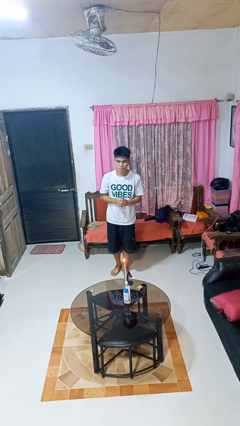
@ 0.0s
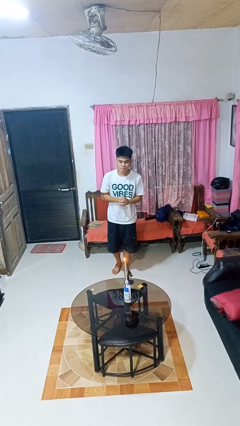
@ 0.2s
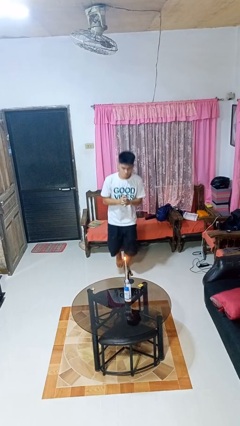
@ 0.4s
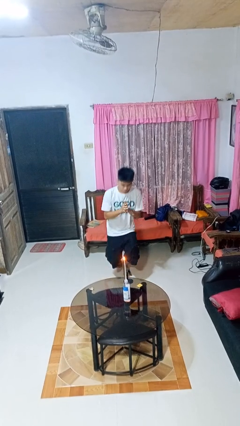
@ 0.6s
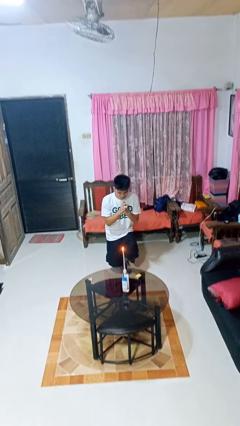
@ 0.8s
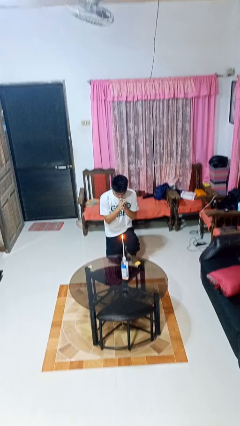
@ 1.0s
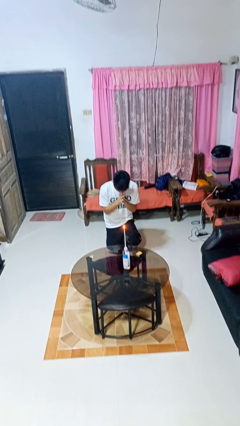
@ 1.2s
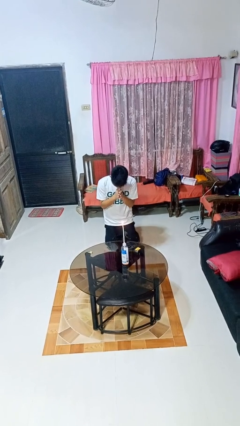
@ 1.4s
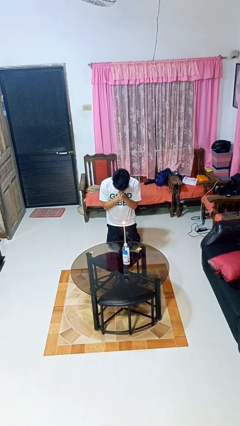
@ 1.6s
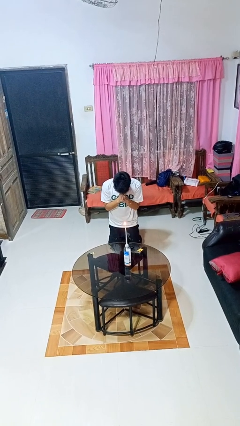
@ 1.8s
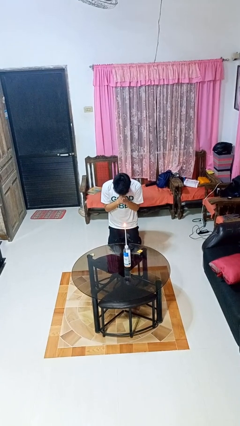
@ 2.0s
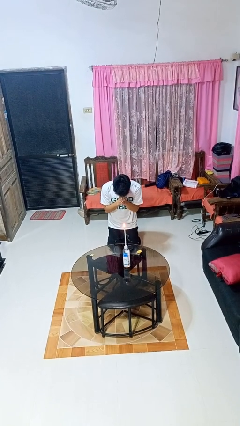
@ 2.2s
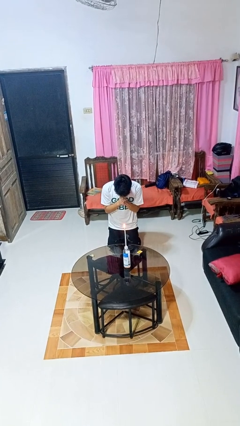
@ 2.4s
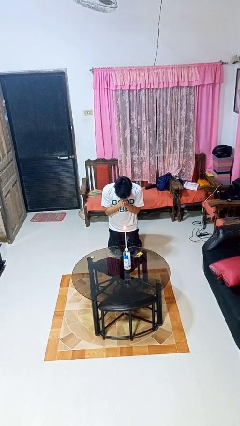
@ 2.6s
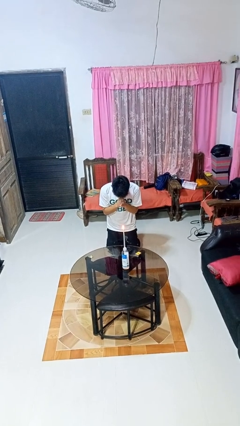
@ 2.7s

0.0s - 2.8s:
person prays

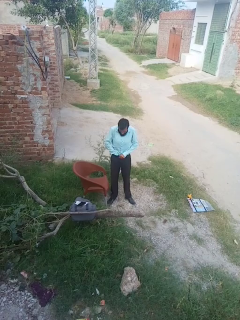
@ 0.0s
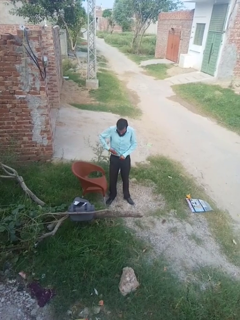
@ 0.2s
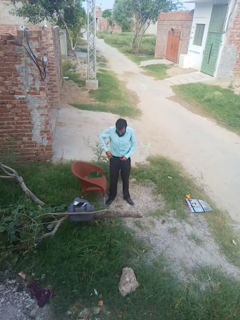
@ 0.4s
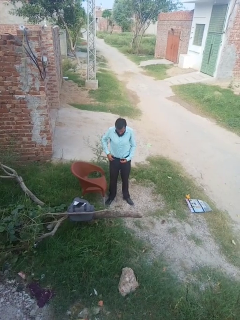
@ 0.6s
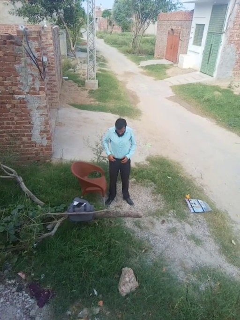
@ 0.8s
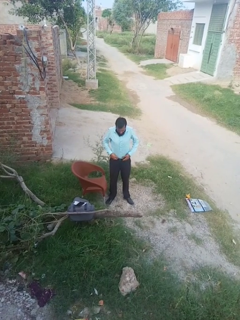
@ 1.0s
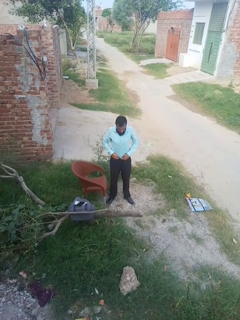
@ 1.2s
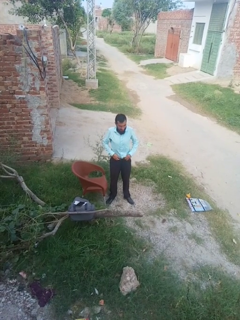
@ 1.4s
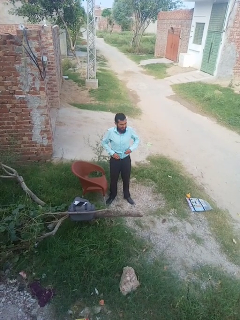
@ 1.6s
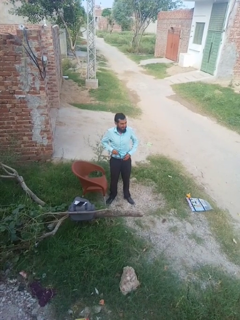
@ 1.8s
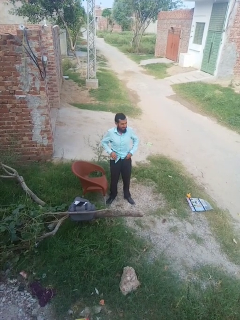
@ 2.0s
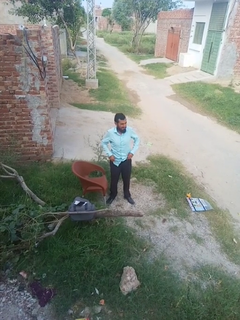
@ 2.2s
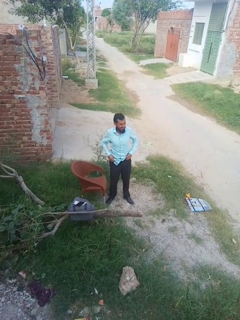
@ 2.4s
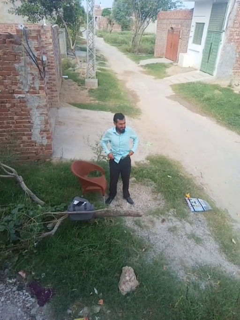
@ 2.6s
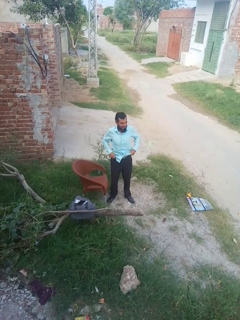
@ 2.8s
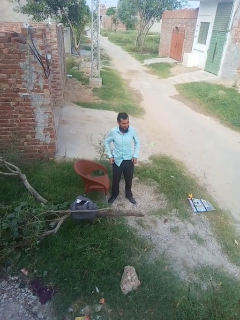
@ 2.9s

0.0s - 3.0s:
person untucks shirt

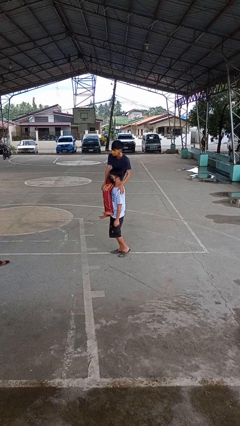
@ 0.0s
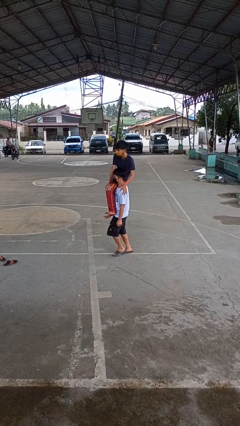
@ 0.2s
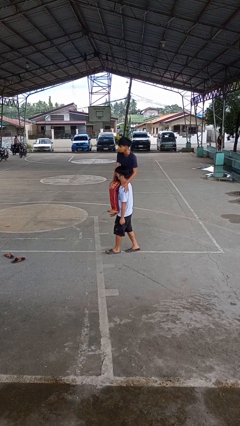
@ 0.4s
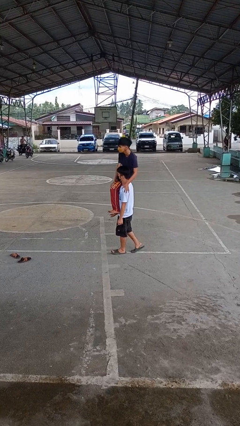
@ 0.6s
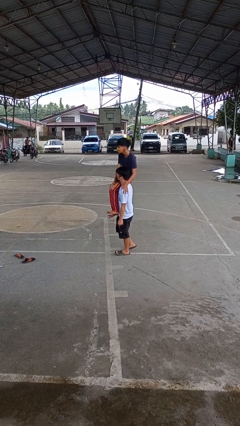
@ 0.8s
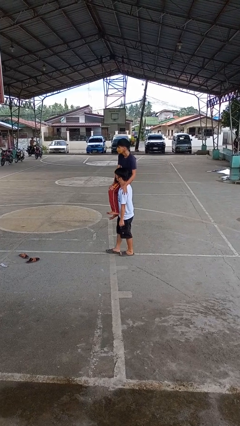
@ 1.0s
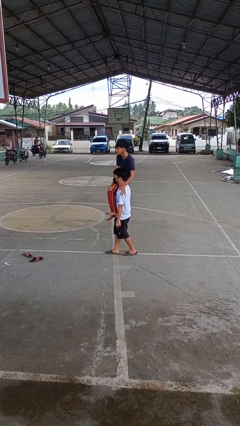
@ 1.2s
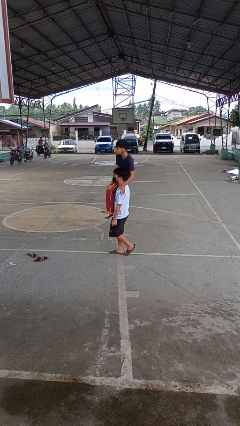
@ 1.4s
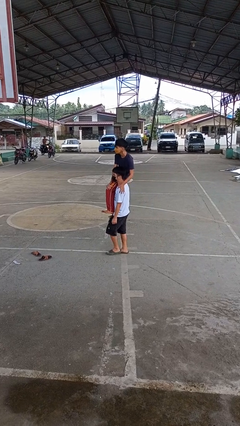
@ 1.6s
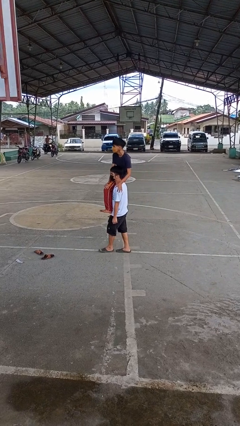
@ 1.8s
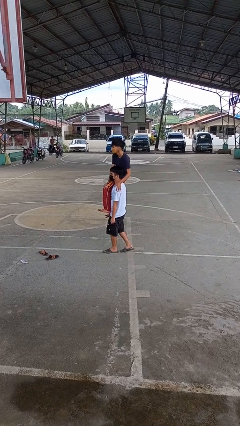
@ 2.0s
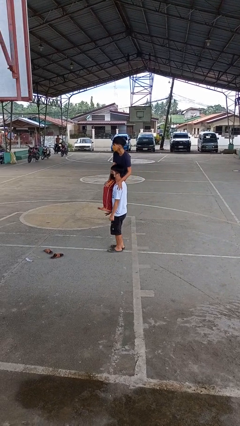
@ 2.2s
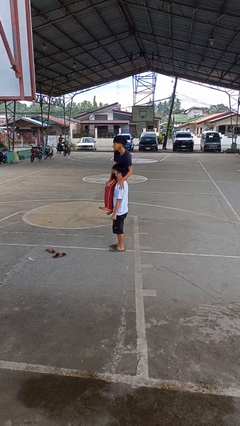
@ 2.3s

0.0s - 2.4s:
person carries person on shoulders

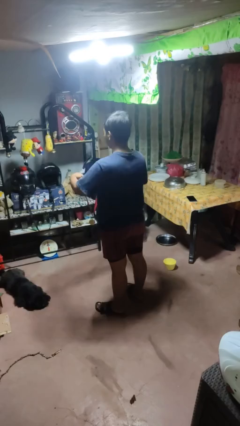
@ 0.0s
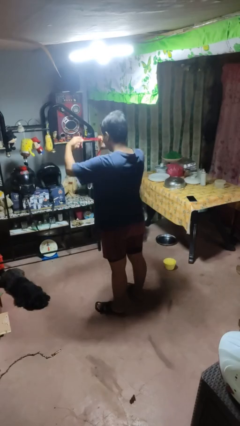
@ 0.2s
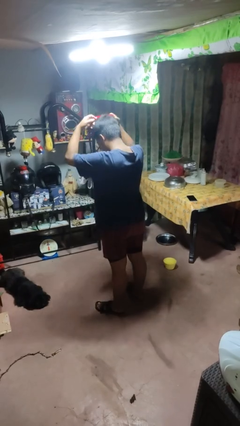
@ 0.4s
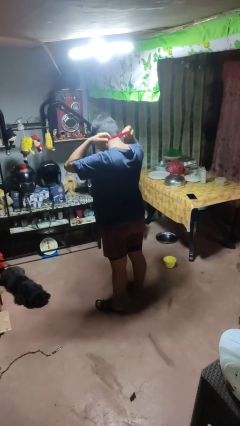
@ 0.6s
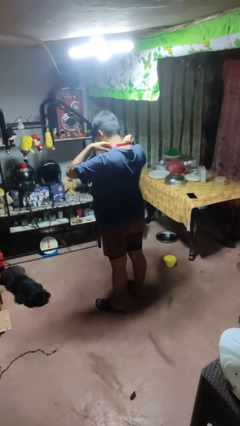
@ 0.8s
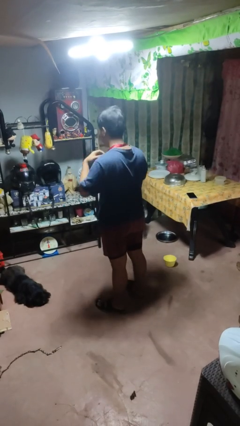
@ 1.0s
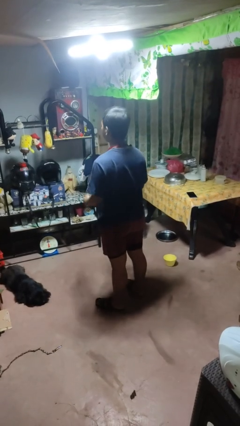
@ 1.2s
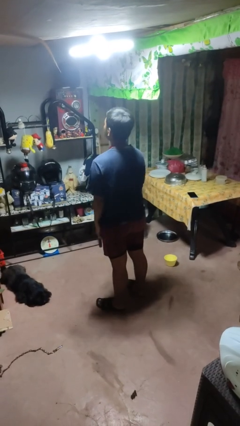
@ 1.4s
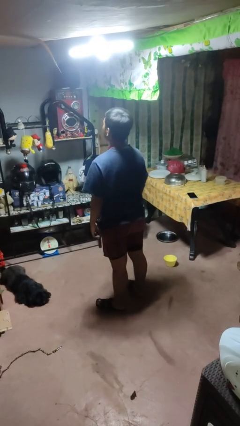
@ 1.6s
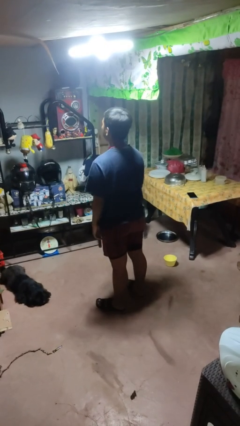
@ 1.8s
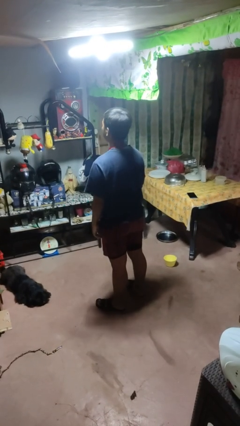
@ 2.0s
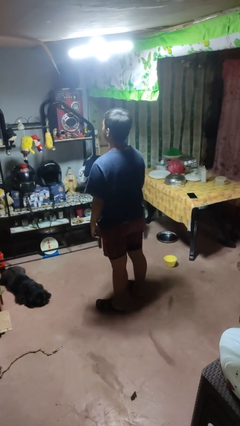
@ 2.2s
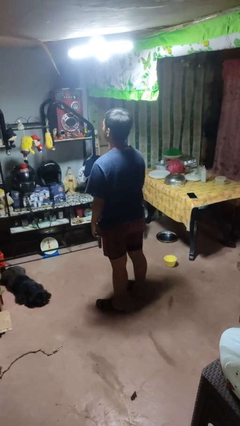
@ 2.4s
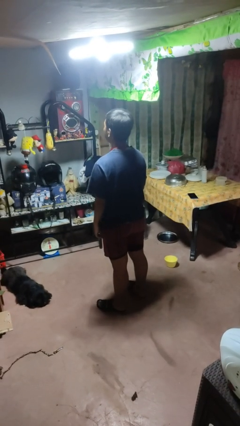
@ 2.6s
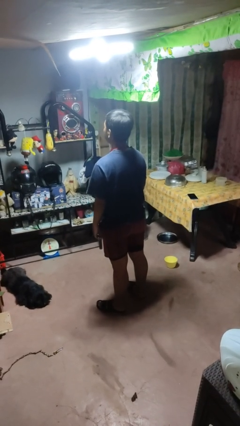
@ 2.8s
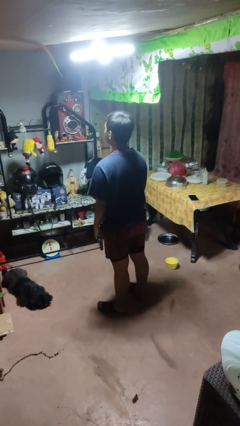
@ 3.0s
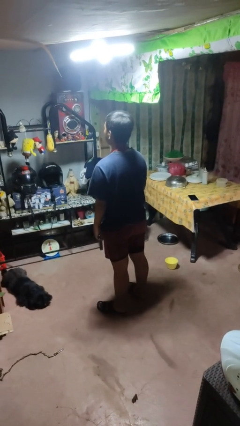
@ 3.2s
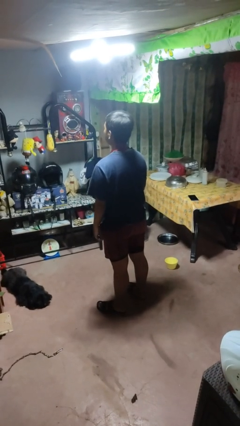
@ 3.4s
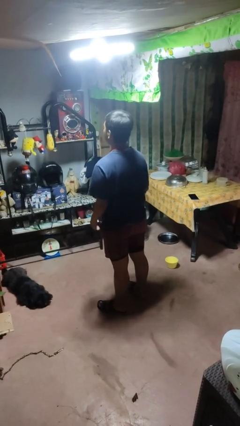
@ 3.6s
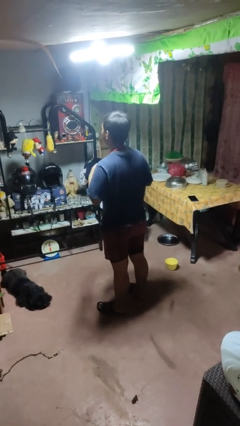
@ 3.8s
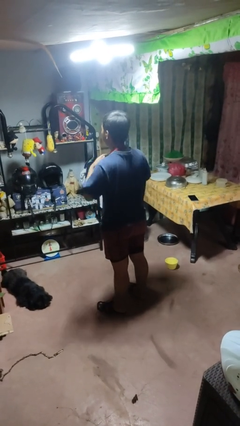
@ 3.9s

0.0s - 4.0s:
person puts on necklace

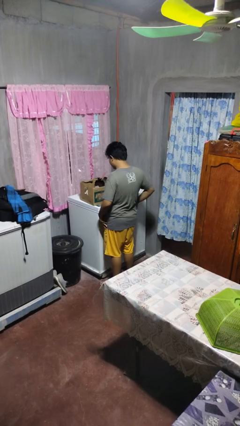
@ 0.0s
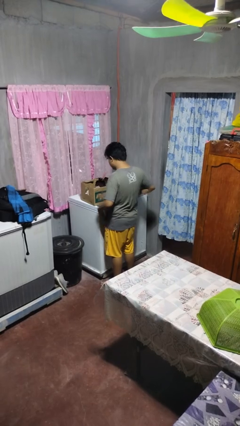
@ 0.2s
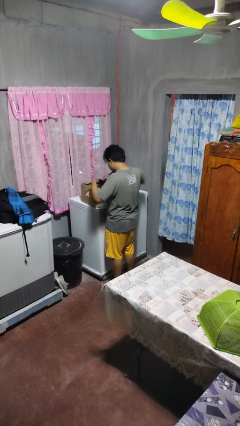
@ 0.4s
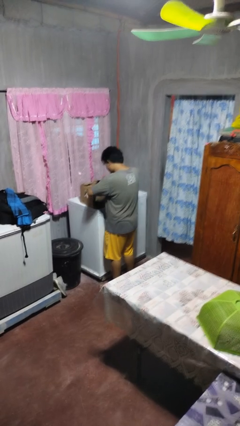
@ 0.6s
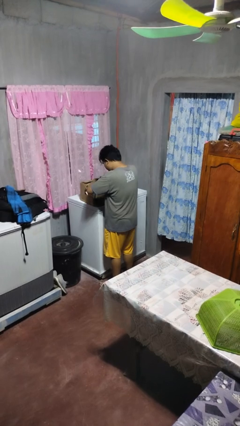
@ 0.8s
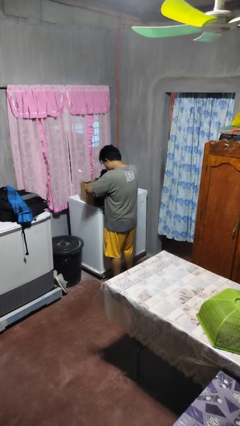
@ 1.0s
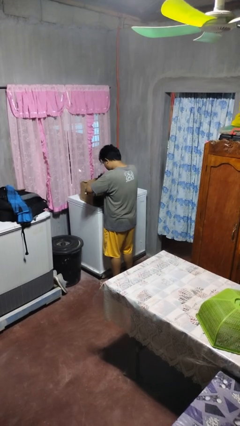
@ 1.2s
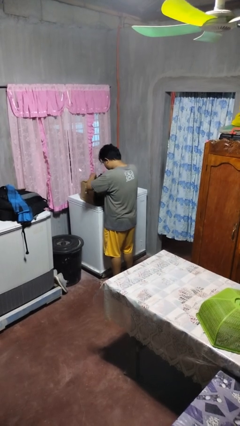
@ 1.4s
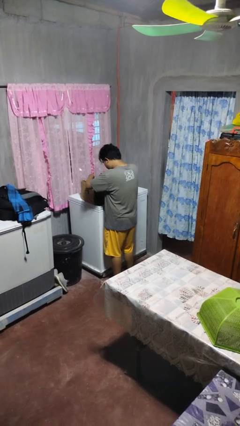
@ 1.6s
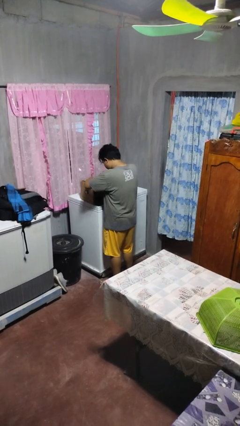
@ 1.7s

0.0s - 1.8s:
person searches in box

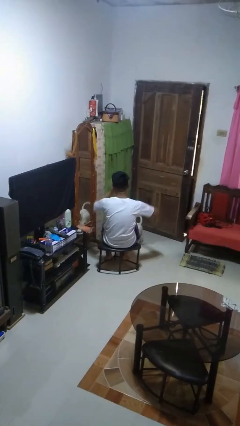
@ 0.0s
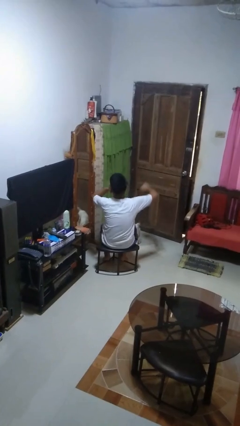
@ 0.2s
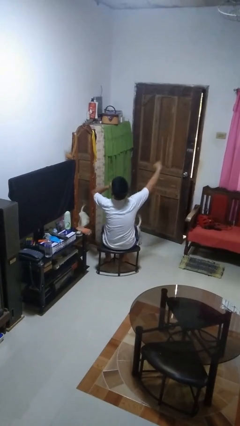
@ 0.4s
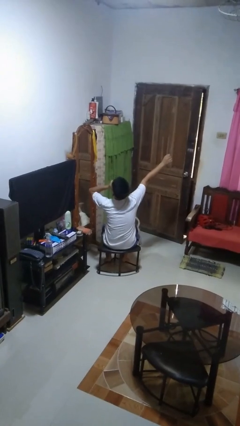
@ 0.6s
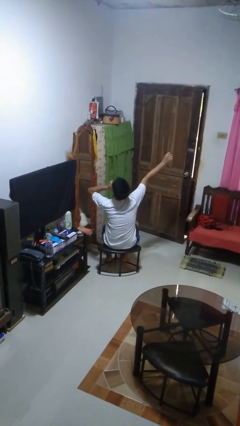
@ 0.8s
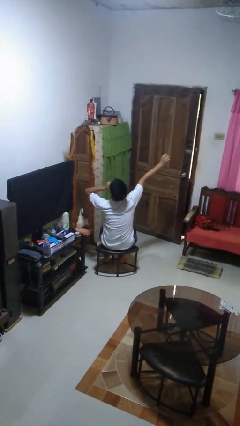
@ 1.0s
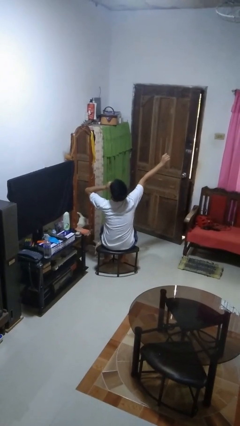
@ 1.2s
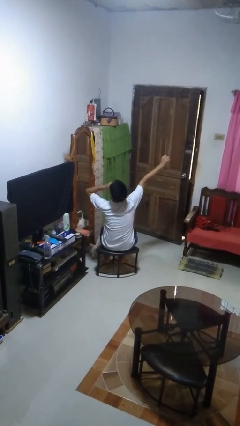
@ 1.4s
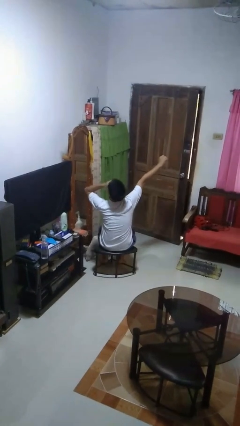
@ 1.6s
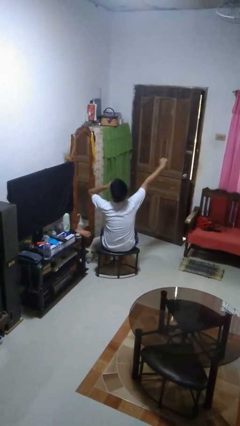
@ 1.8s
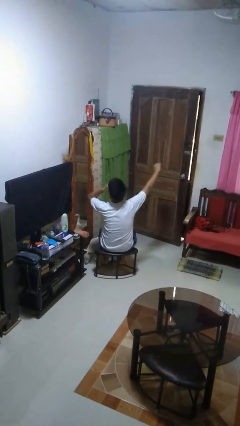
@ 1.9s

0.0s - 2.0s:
person yawns

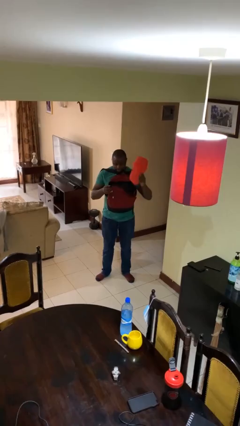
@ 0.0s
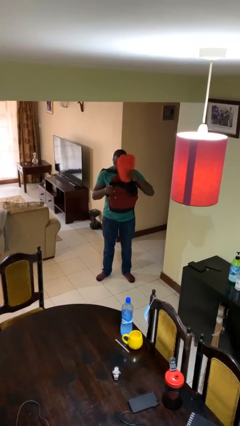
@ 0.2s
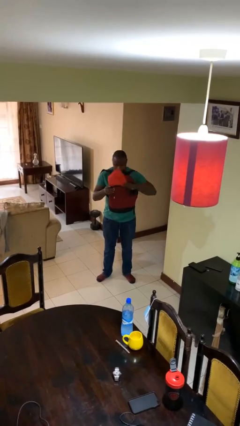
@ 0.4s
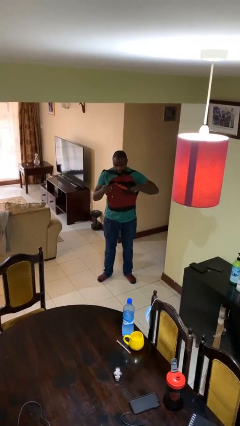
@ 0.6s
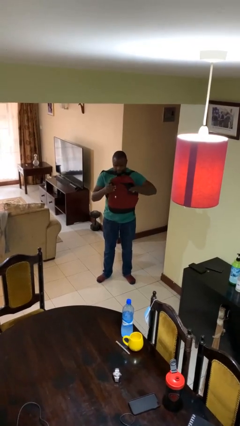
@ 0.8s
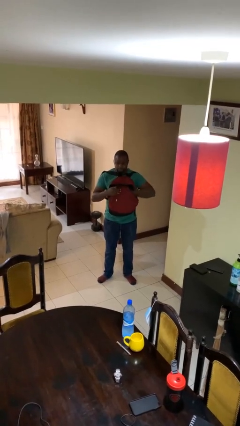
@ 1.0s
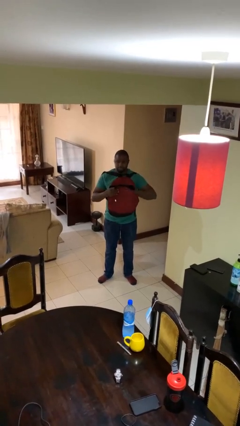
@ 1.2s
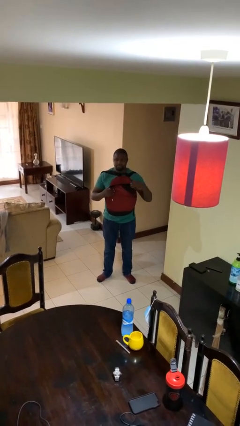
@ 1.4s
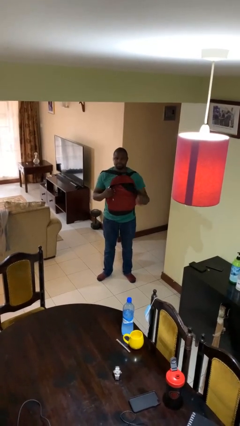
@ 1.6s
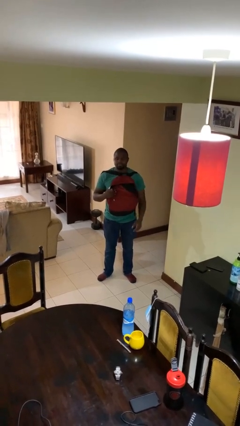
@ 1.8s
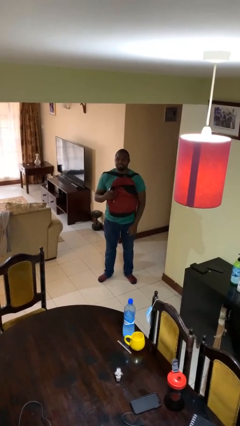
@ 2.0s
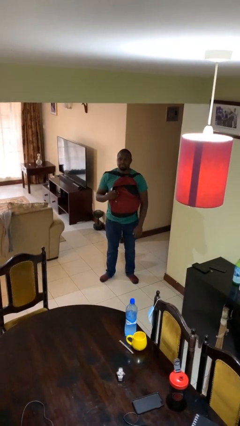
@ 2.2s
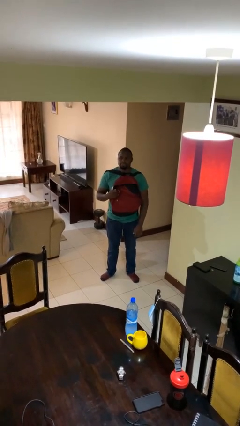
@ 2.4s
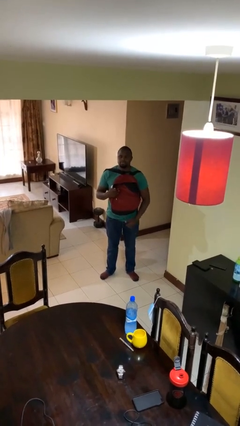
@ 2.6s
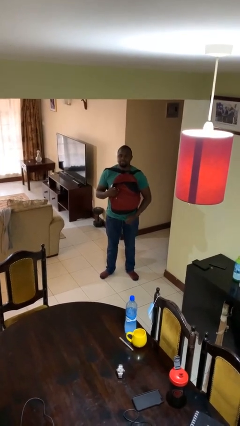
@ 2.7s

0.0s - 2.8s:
person puts object into backpack
